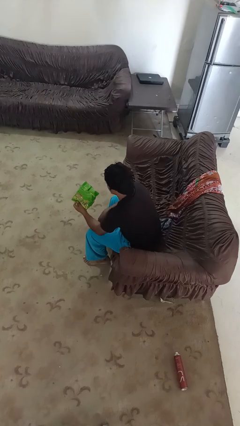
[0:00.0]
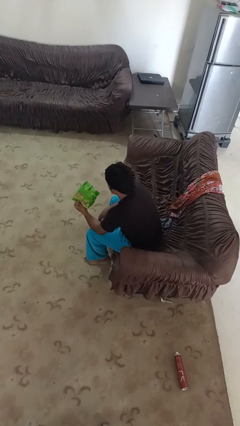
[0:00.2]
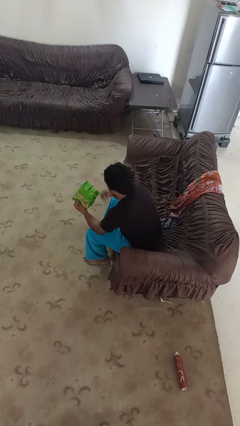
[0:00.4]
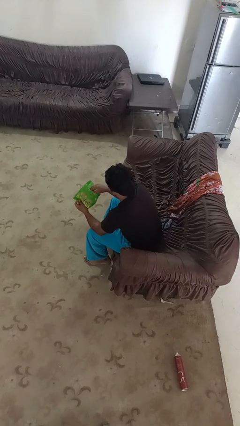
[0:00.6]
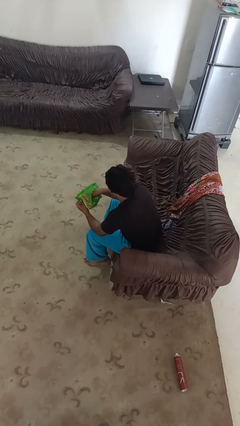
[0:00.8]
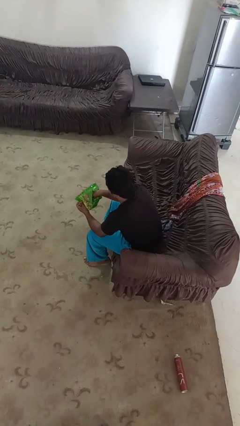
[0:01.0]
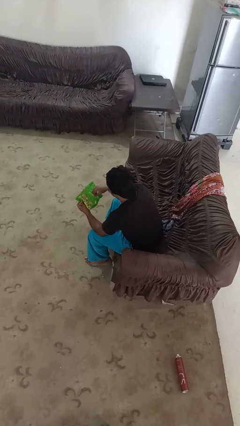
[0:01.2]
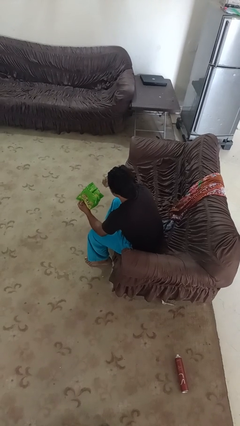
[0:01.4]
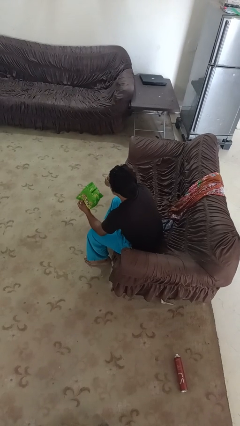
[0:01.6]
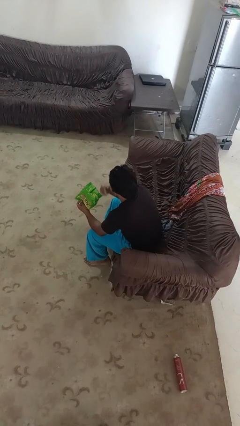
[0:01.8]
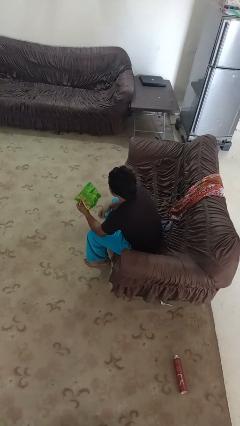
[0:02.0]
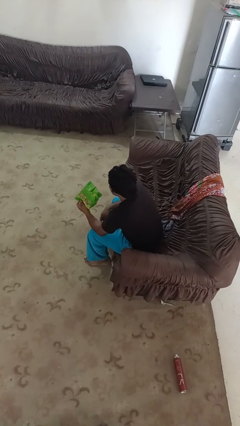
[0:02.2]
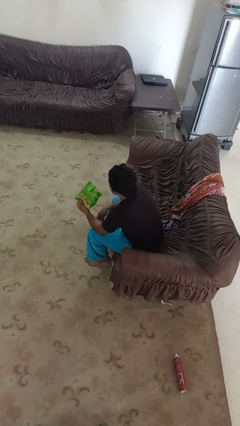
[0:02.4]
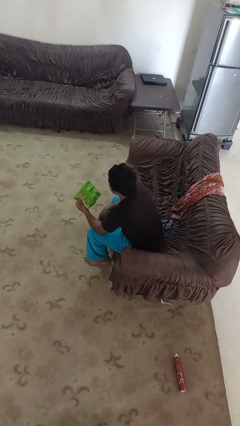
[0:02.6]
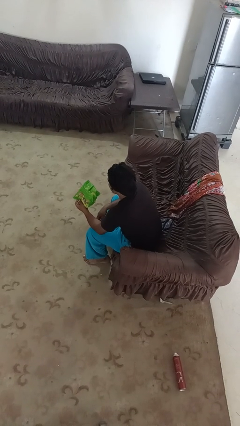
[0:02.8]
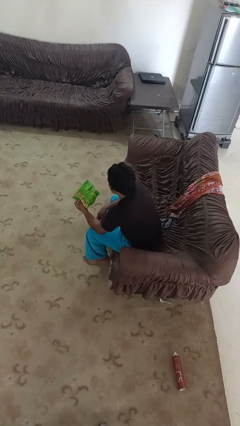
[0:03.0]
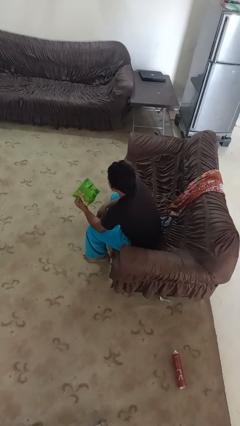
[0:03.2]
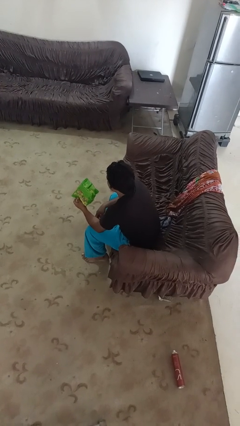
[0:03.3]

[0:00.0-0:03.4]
person eats snack from bag

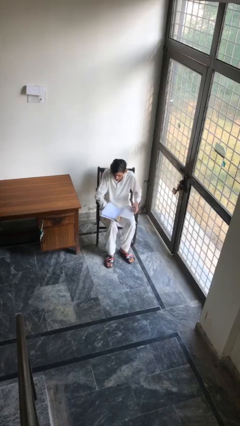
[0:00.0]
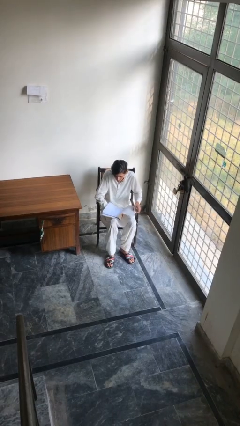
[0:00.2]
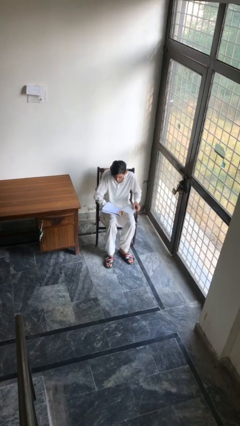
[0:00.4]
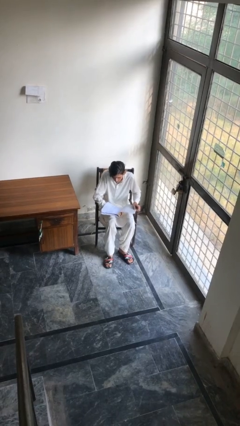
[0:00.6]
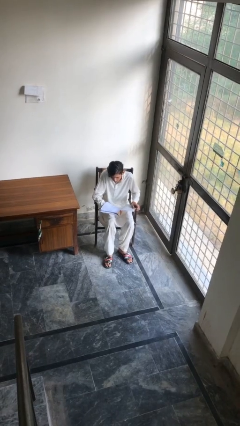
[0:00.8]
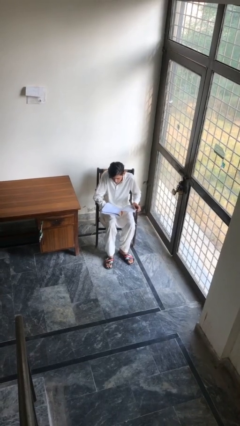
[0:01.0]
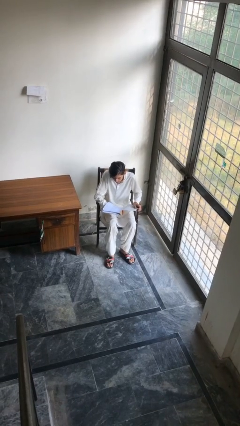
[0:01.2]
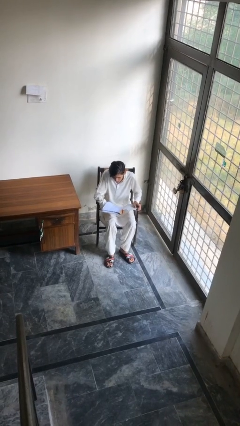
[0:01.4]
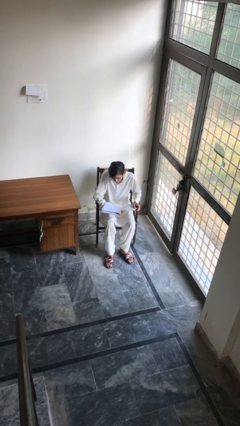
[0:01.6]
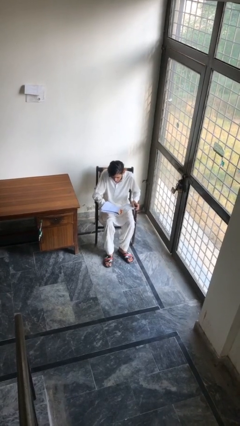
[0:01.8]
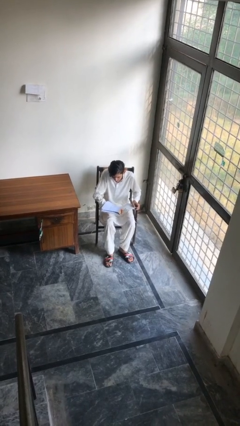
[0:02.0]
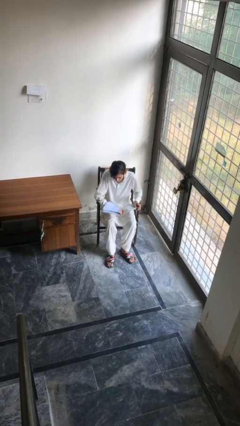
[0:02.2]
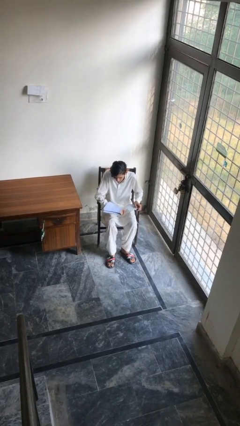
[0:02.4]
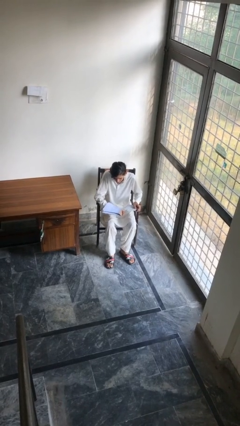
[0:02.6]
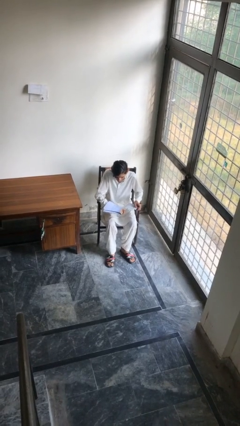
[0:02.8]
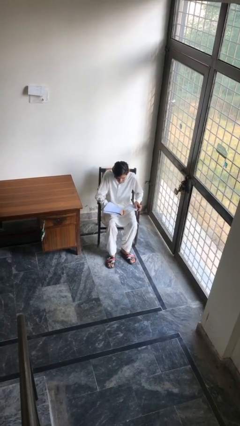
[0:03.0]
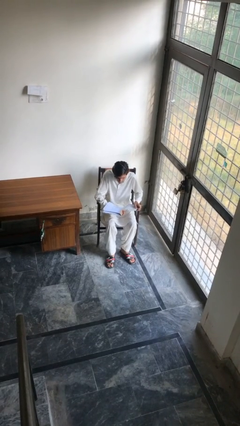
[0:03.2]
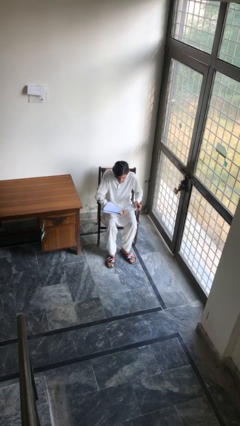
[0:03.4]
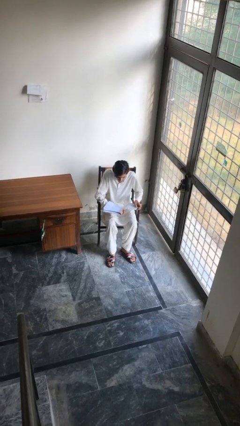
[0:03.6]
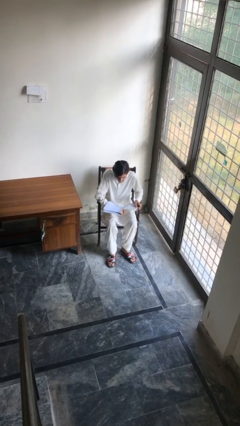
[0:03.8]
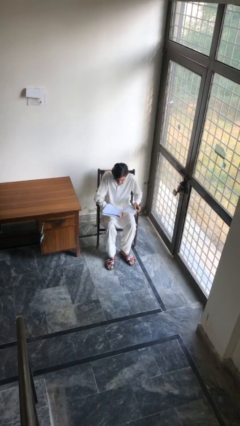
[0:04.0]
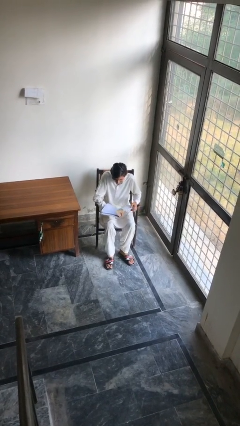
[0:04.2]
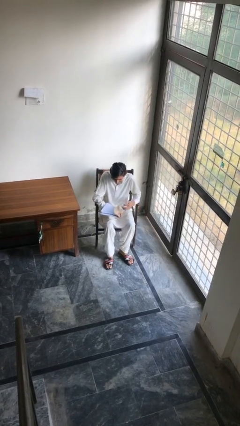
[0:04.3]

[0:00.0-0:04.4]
person reads document

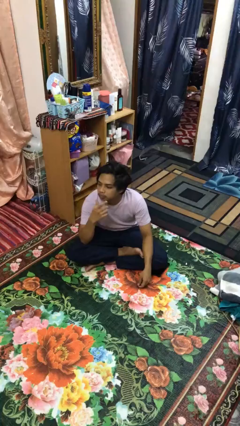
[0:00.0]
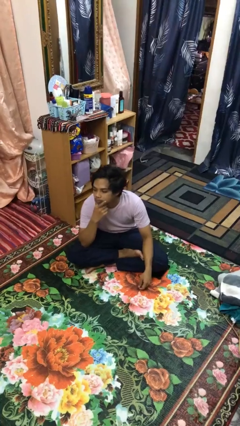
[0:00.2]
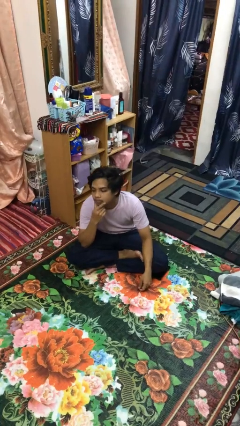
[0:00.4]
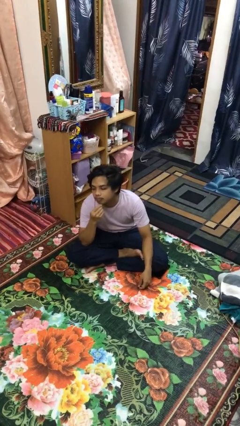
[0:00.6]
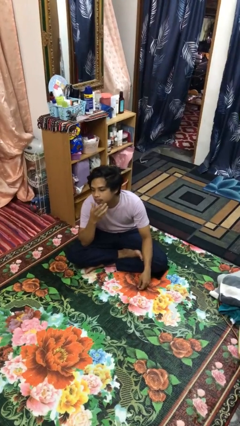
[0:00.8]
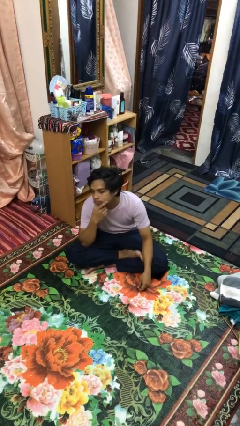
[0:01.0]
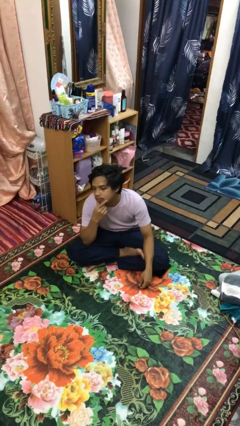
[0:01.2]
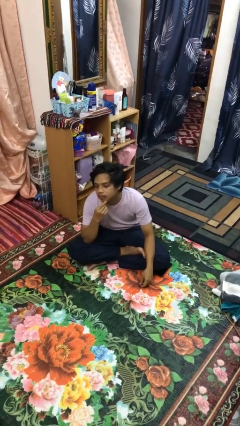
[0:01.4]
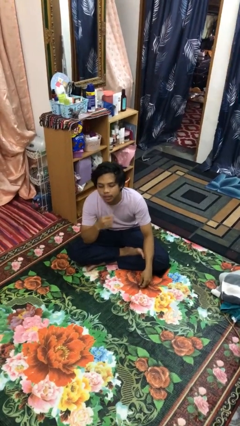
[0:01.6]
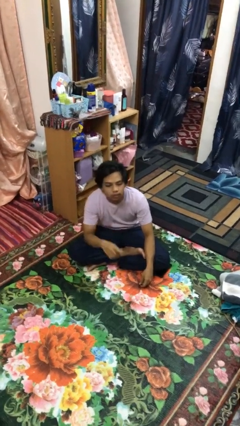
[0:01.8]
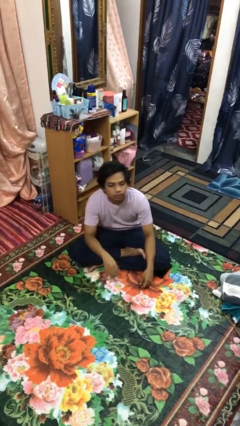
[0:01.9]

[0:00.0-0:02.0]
person strokes chin

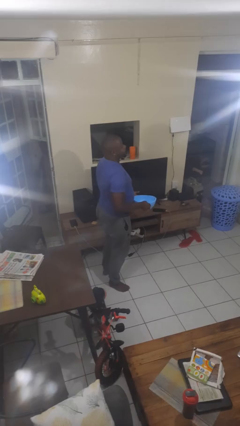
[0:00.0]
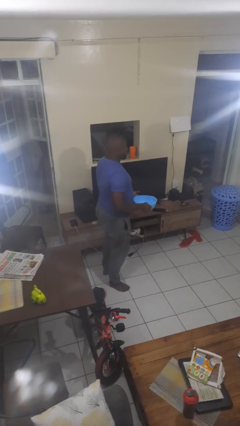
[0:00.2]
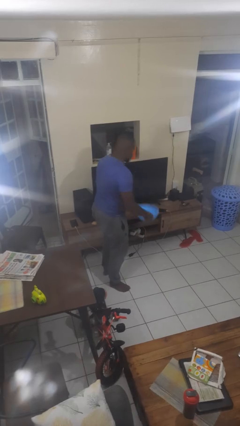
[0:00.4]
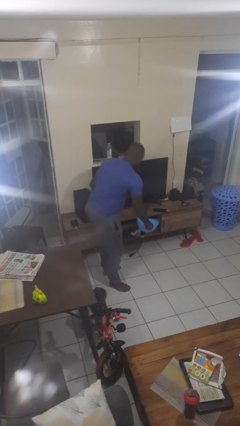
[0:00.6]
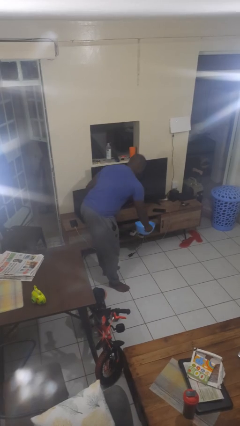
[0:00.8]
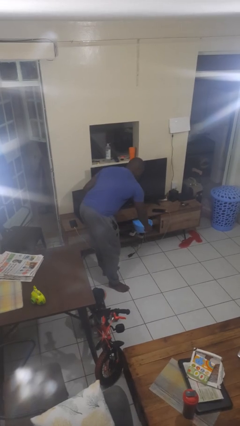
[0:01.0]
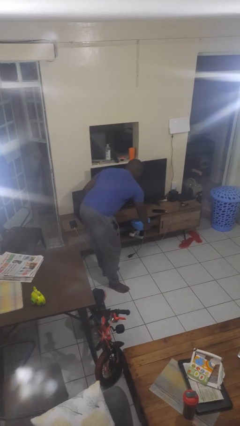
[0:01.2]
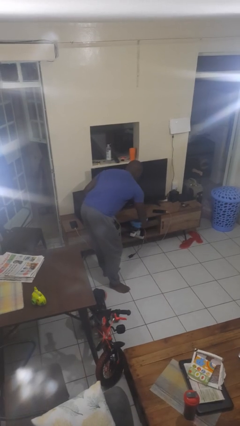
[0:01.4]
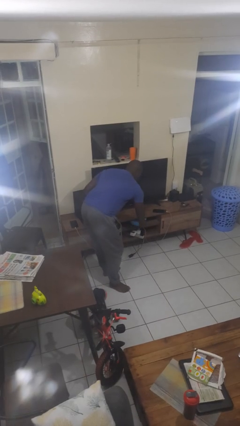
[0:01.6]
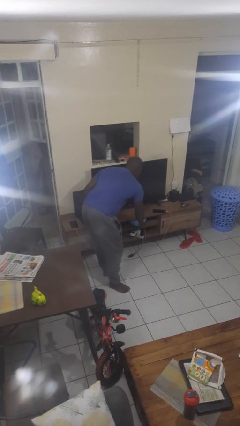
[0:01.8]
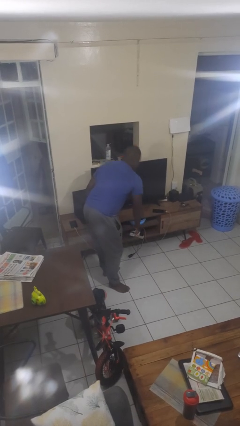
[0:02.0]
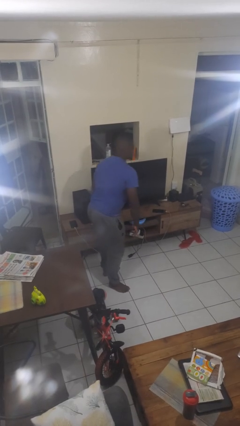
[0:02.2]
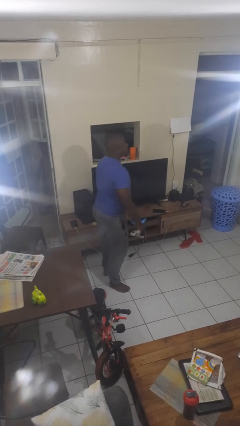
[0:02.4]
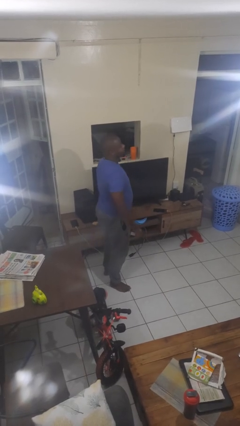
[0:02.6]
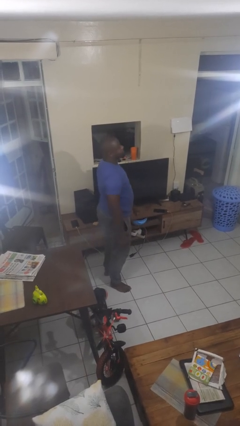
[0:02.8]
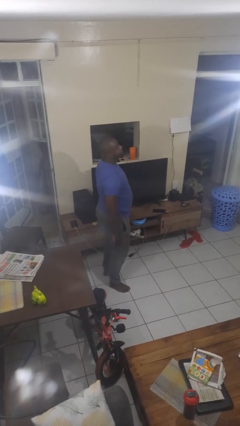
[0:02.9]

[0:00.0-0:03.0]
person puts down object into cabinet

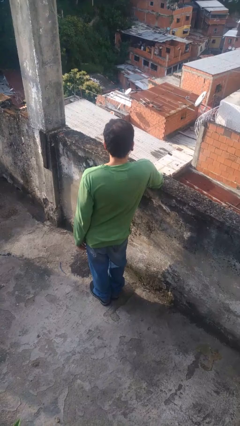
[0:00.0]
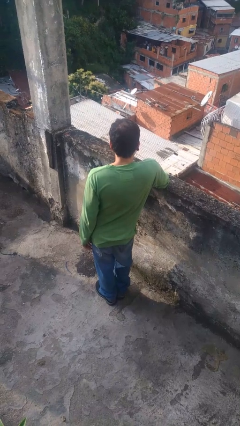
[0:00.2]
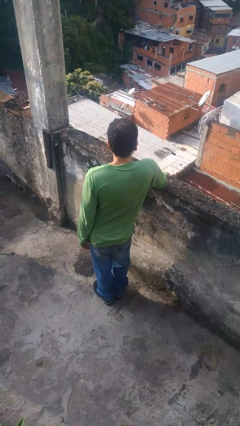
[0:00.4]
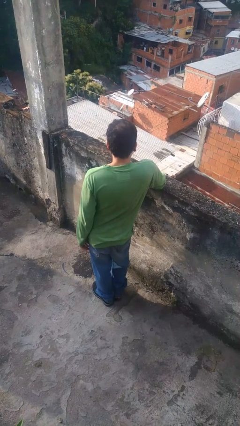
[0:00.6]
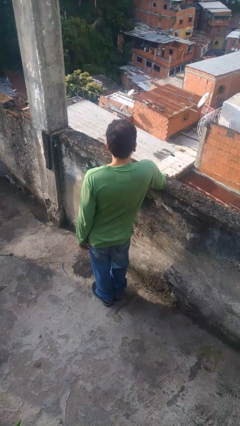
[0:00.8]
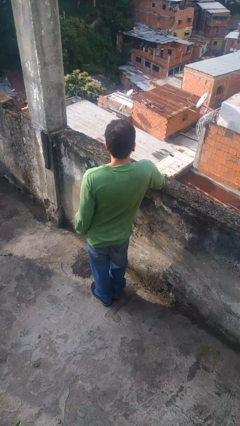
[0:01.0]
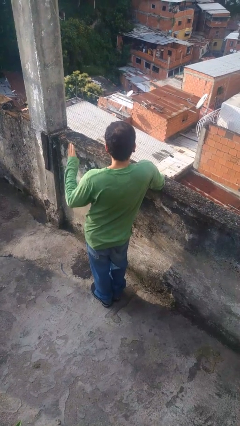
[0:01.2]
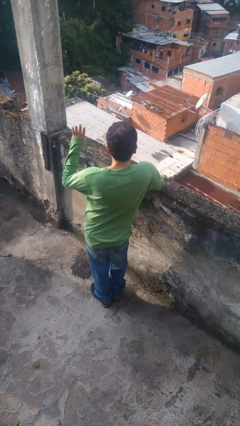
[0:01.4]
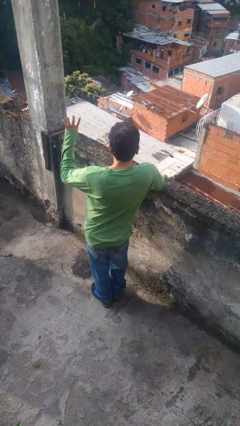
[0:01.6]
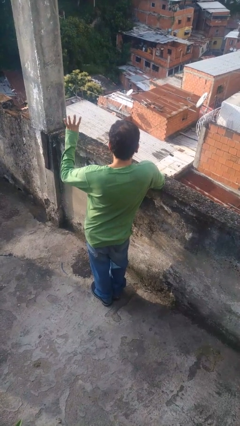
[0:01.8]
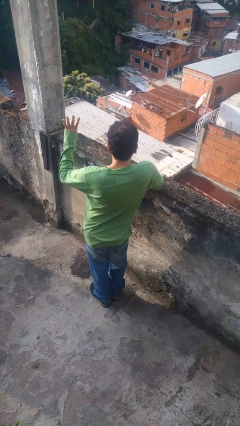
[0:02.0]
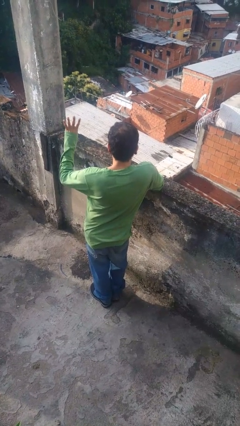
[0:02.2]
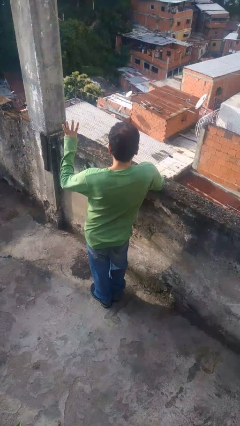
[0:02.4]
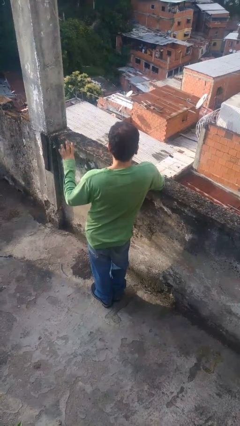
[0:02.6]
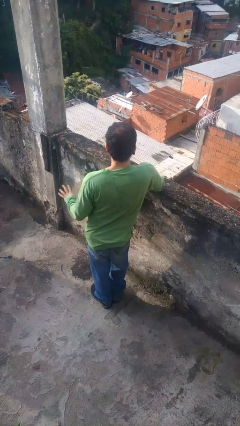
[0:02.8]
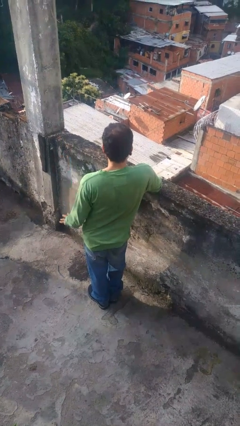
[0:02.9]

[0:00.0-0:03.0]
person gestures number four

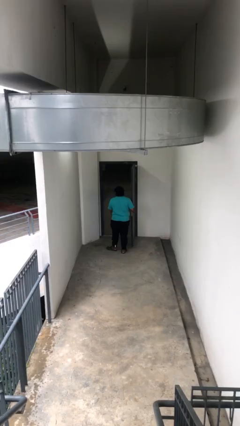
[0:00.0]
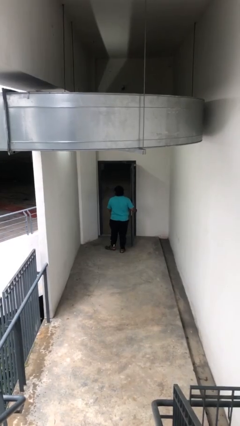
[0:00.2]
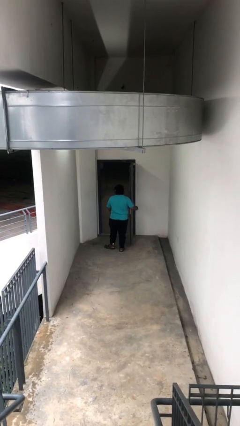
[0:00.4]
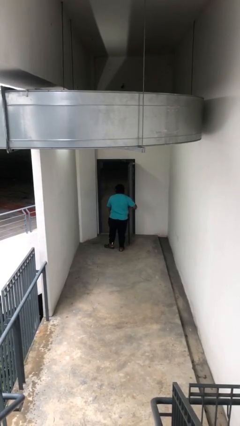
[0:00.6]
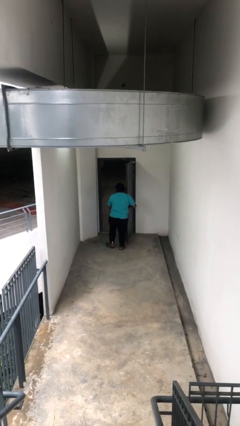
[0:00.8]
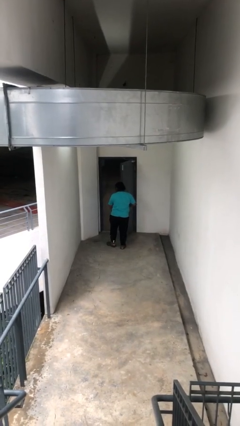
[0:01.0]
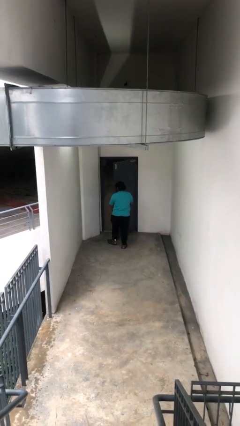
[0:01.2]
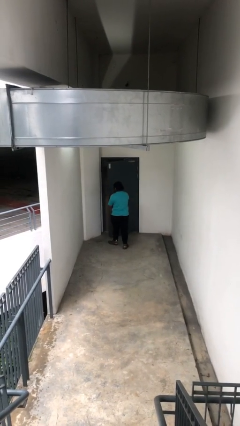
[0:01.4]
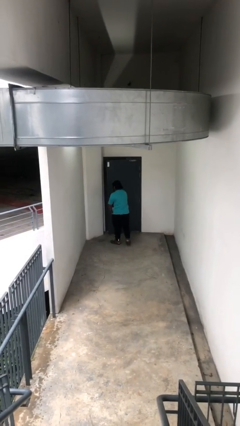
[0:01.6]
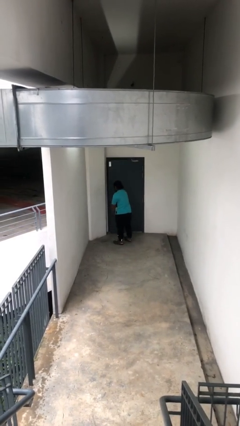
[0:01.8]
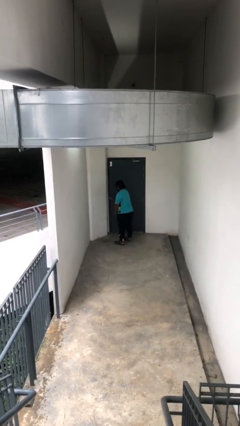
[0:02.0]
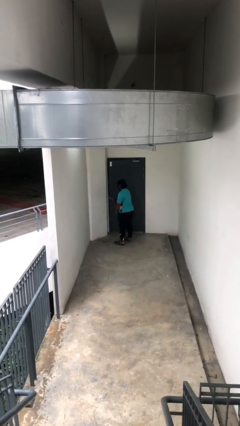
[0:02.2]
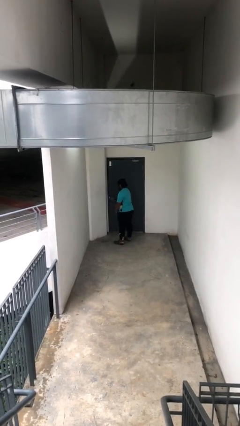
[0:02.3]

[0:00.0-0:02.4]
person closes facility door
